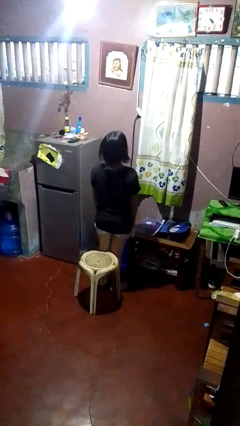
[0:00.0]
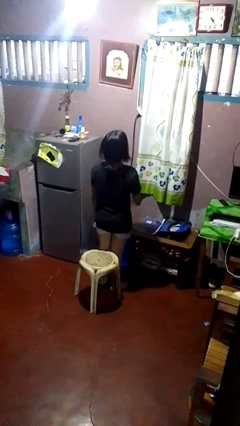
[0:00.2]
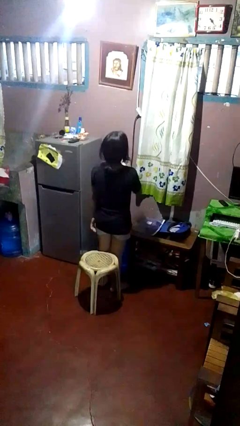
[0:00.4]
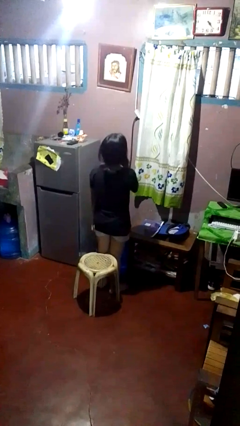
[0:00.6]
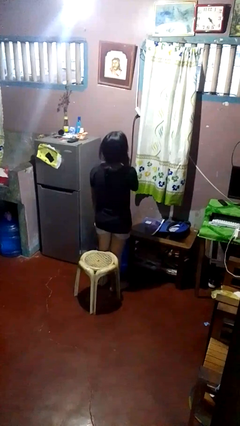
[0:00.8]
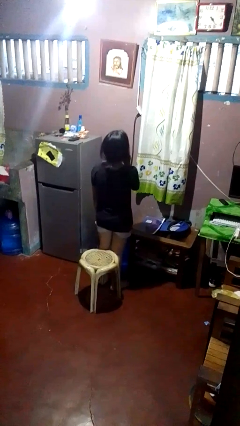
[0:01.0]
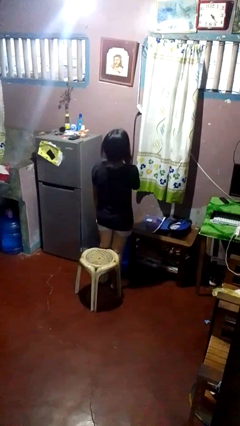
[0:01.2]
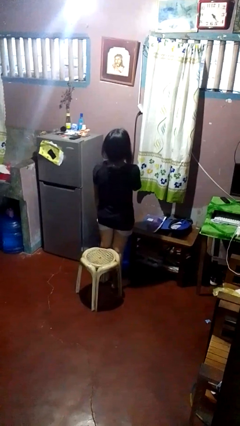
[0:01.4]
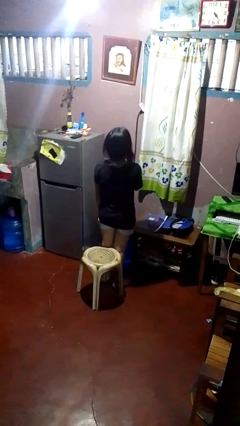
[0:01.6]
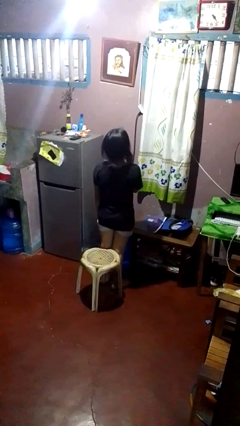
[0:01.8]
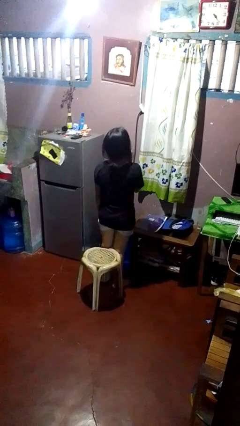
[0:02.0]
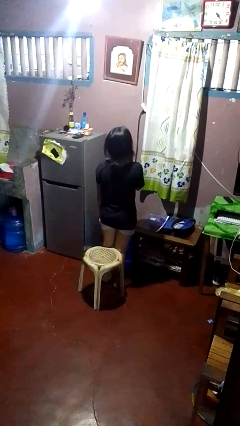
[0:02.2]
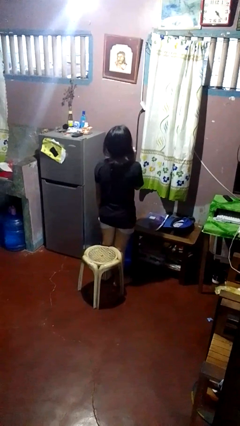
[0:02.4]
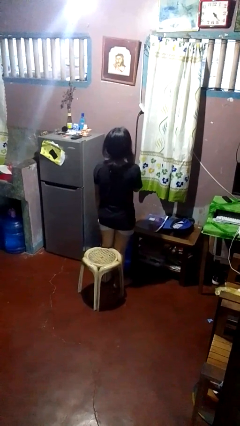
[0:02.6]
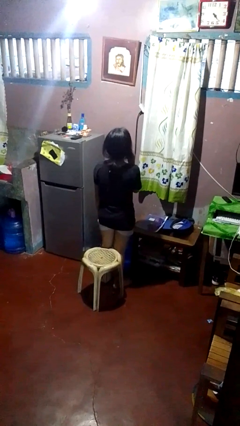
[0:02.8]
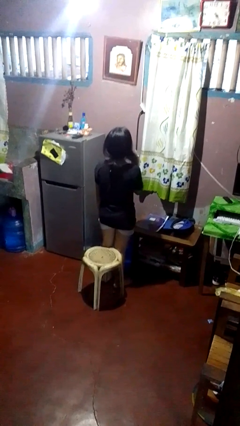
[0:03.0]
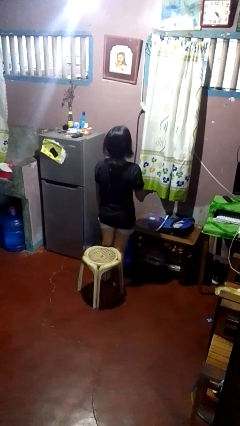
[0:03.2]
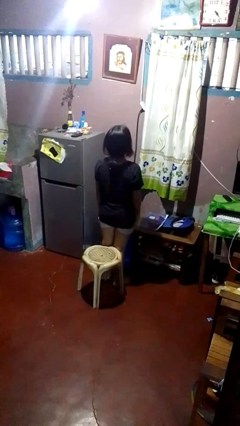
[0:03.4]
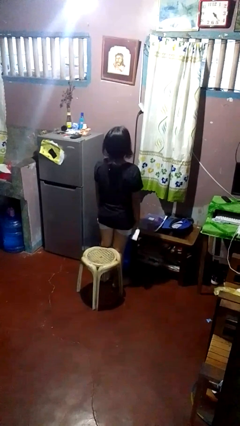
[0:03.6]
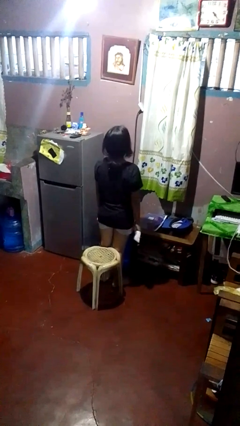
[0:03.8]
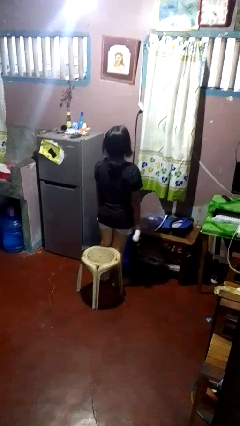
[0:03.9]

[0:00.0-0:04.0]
person wipes mouth with napkin

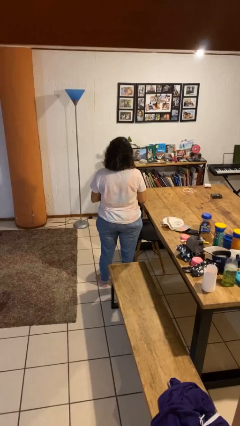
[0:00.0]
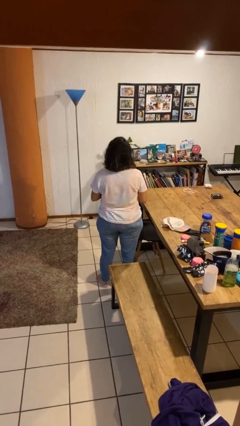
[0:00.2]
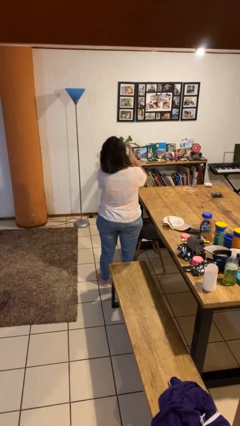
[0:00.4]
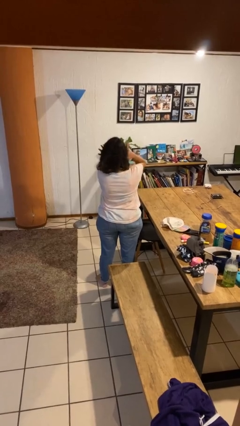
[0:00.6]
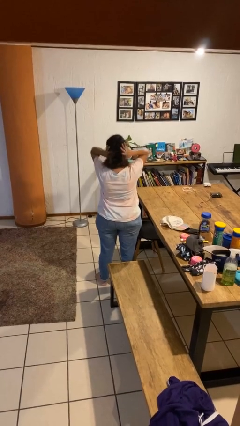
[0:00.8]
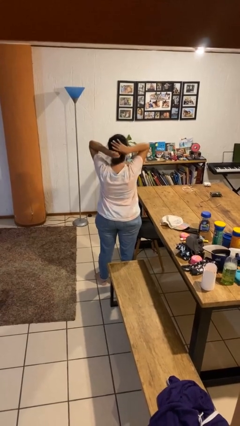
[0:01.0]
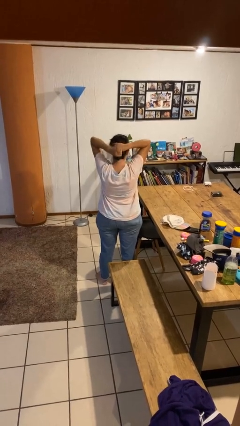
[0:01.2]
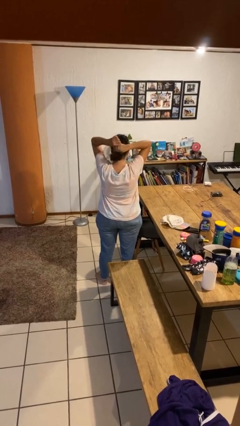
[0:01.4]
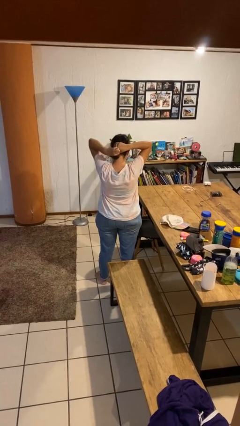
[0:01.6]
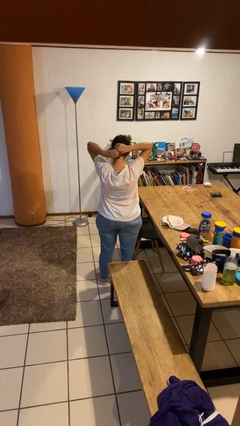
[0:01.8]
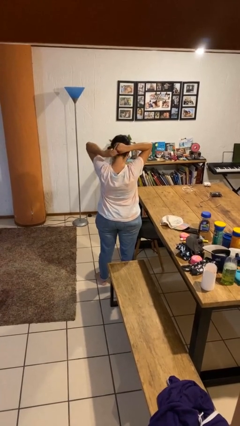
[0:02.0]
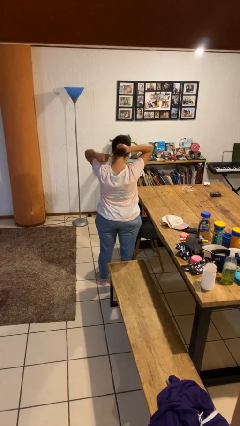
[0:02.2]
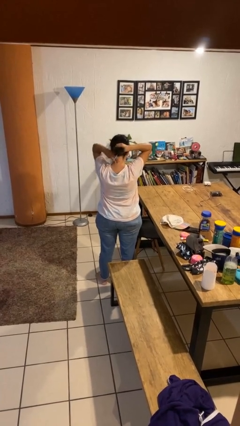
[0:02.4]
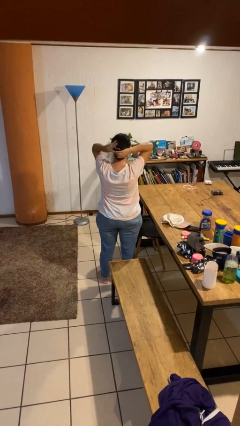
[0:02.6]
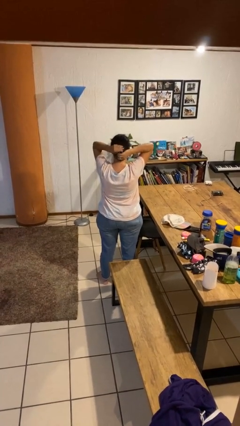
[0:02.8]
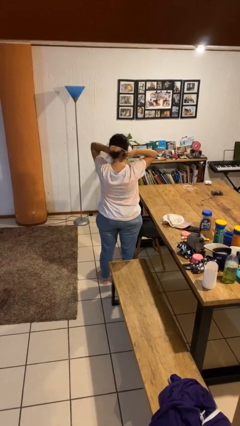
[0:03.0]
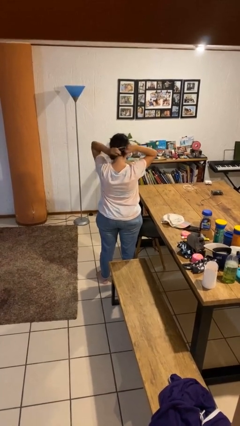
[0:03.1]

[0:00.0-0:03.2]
person puts hair in ponytail

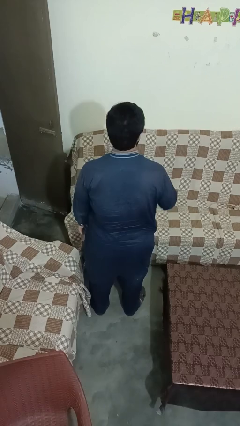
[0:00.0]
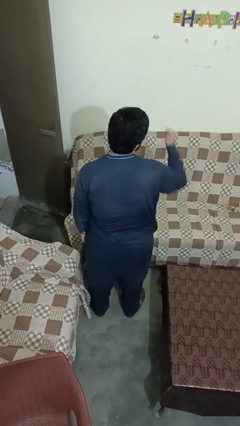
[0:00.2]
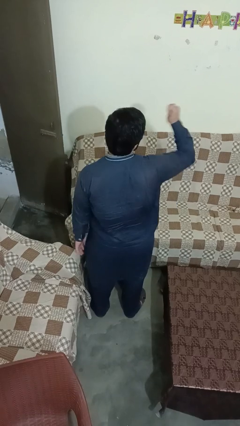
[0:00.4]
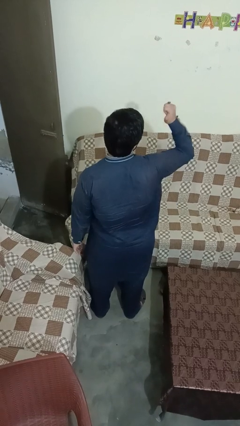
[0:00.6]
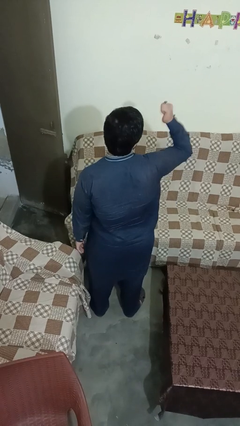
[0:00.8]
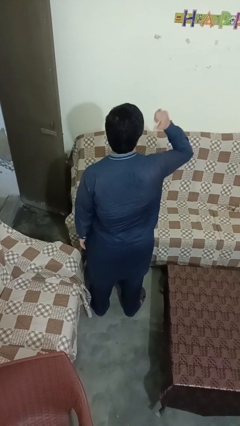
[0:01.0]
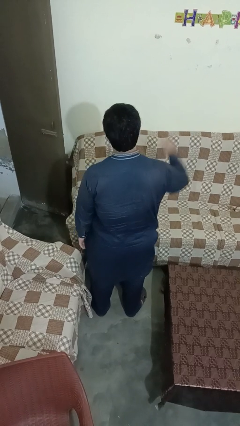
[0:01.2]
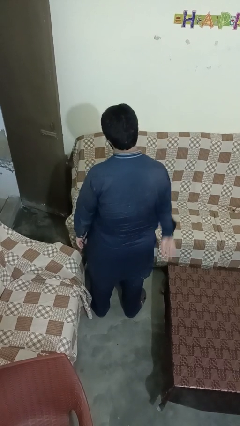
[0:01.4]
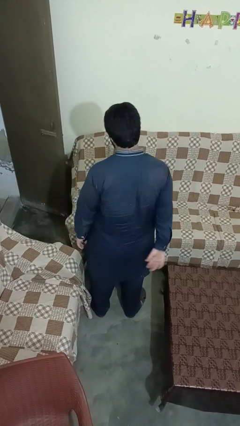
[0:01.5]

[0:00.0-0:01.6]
person gestures behind me

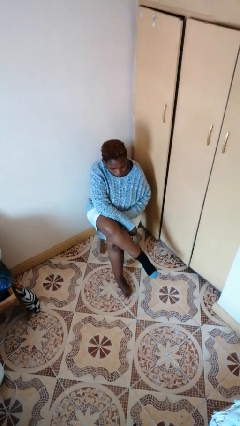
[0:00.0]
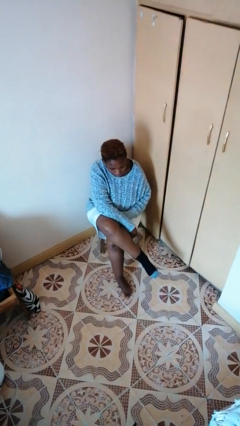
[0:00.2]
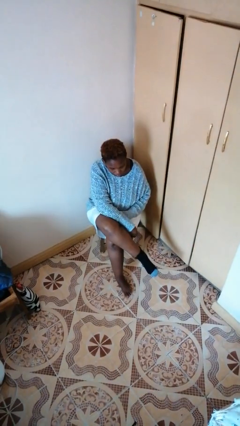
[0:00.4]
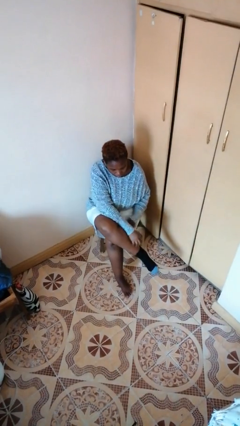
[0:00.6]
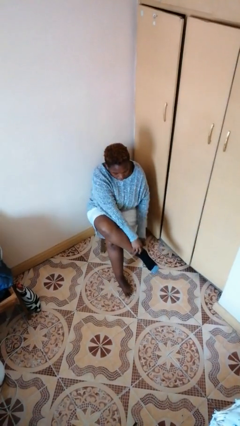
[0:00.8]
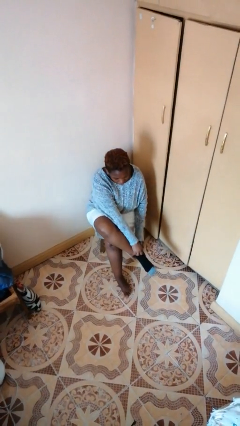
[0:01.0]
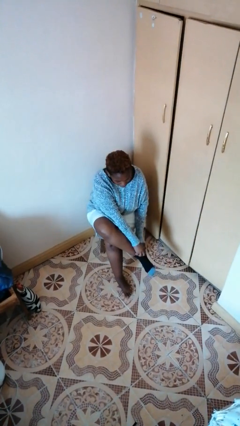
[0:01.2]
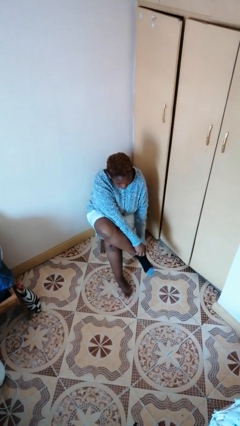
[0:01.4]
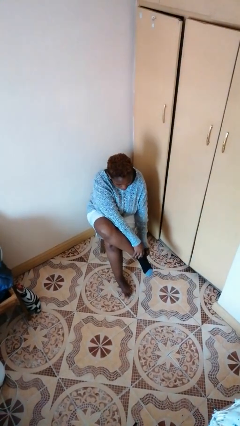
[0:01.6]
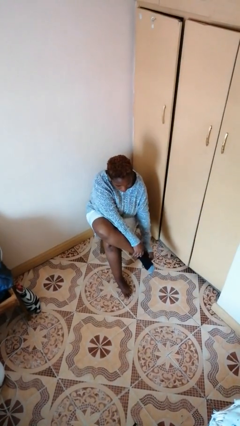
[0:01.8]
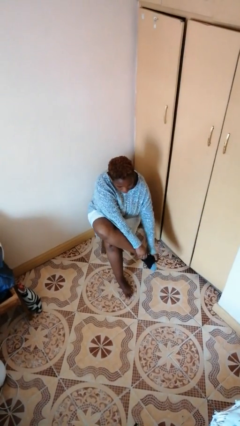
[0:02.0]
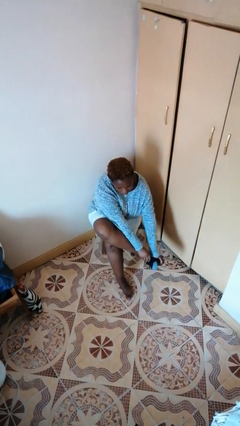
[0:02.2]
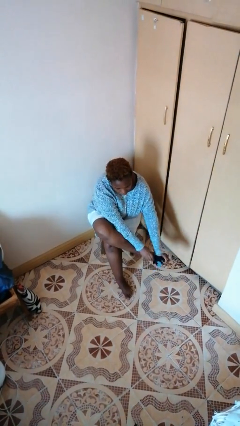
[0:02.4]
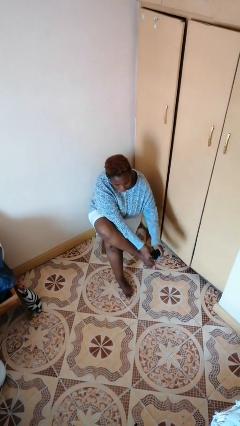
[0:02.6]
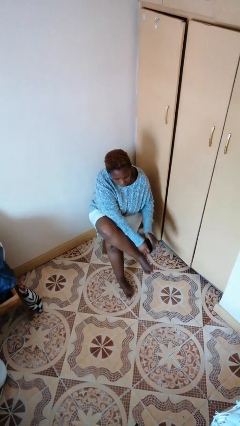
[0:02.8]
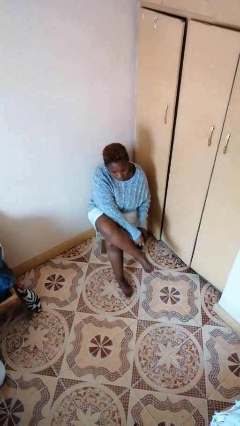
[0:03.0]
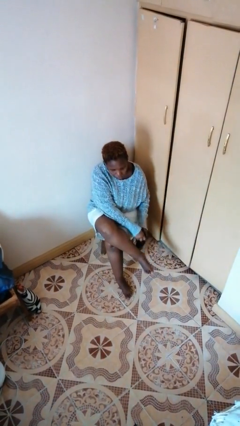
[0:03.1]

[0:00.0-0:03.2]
person takes off socks

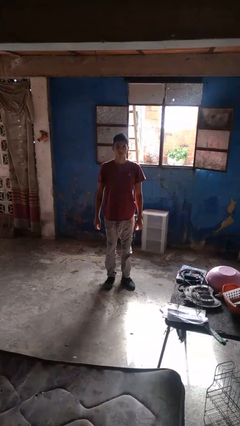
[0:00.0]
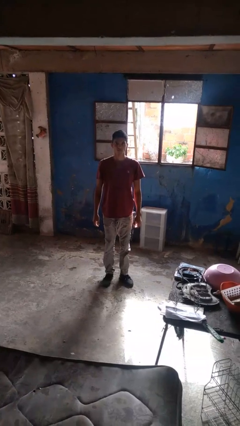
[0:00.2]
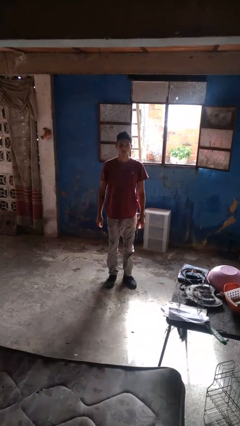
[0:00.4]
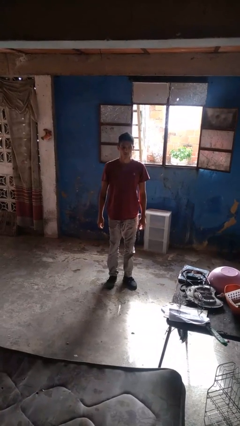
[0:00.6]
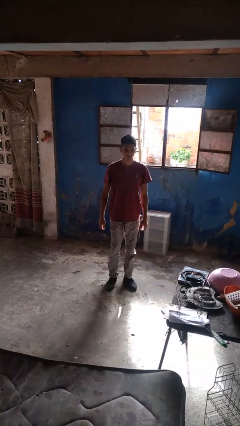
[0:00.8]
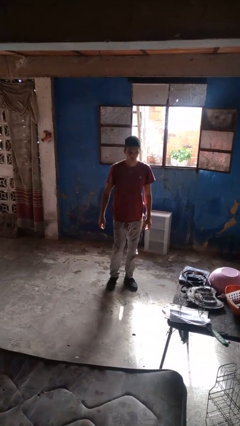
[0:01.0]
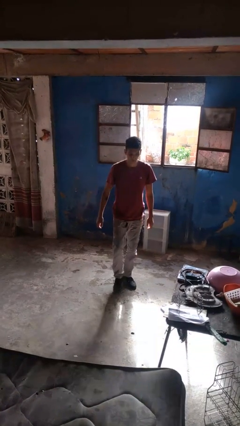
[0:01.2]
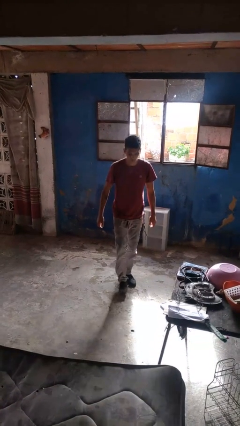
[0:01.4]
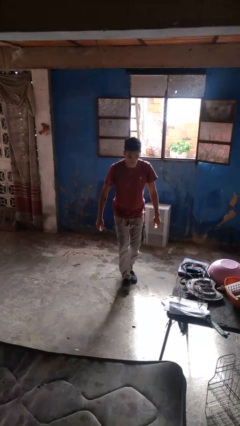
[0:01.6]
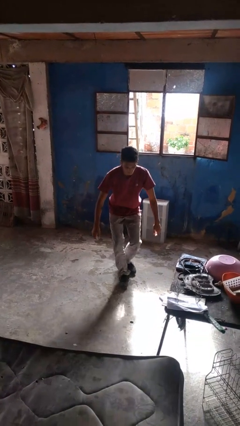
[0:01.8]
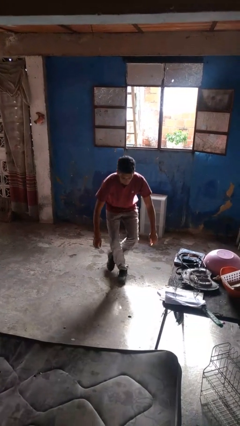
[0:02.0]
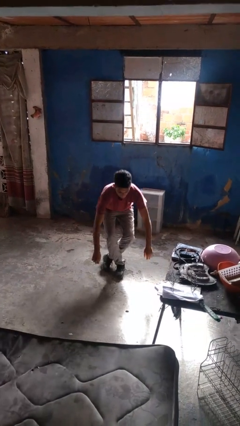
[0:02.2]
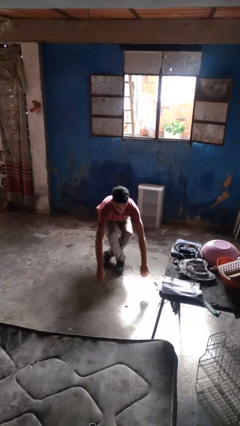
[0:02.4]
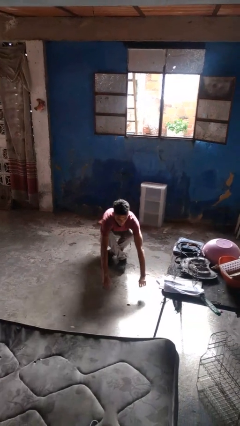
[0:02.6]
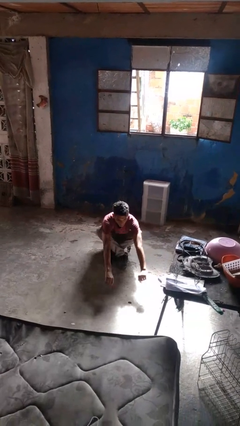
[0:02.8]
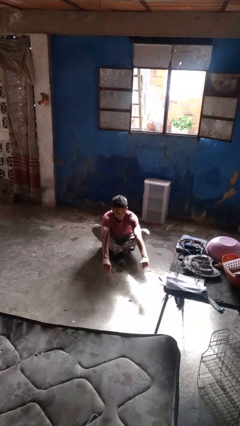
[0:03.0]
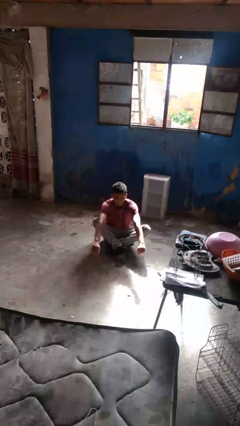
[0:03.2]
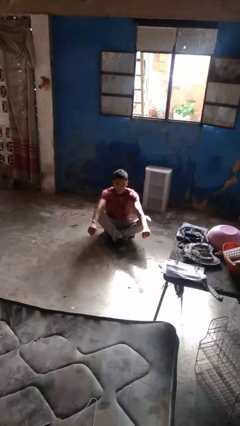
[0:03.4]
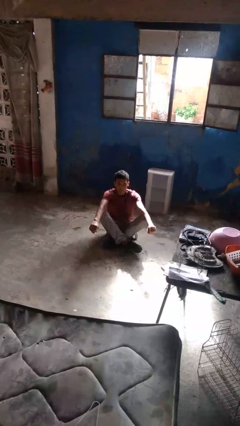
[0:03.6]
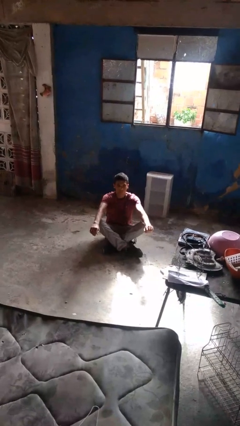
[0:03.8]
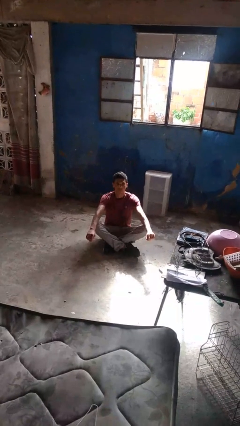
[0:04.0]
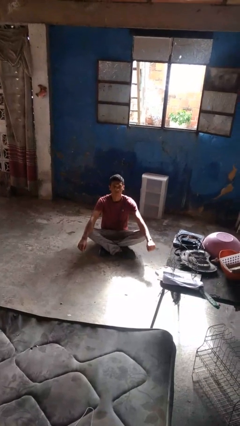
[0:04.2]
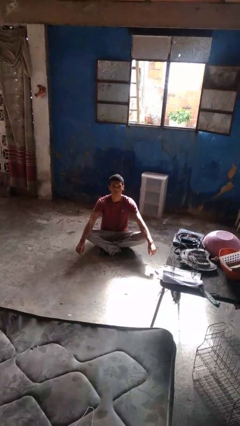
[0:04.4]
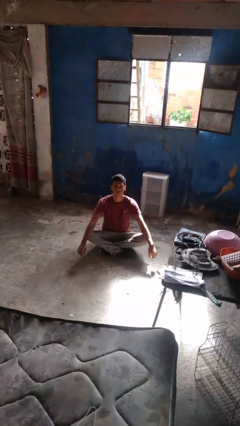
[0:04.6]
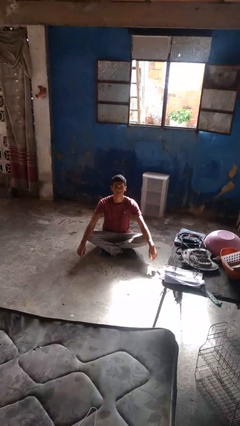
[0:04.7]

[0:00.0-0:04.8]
person sits crisscross

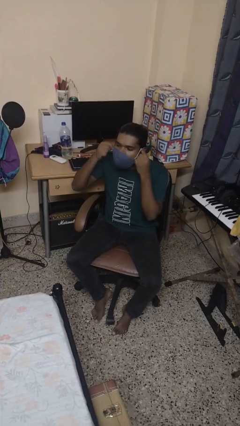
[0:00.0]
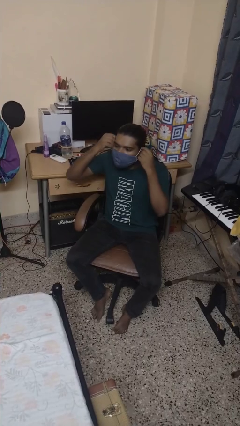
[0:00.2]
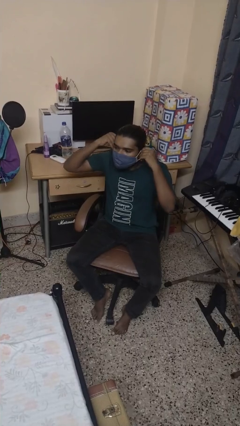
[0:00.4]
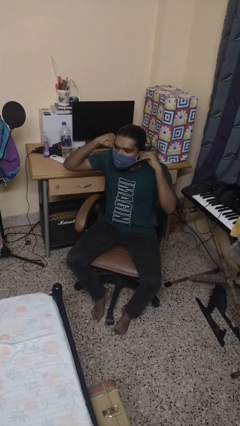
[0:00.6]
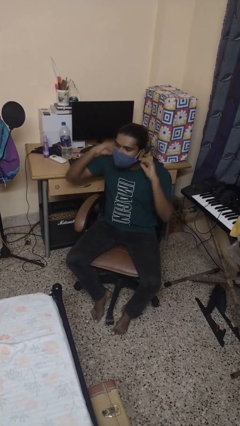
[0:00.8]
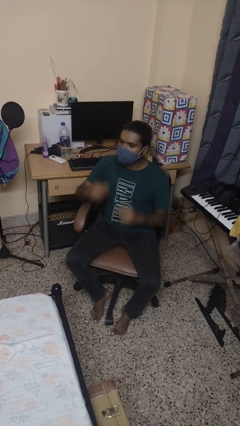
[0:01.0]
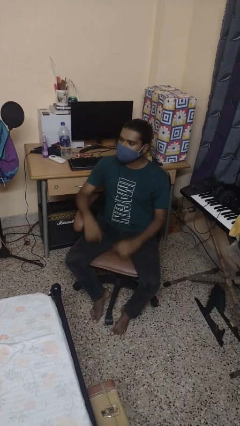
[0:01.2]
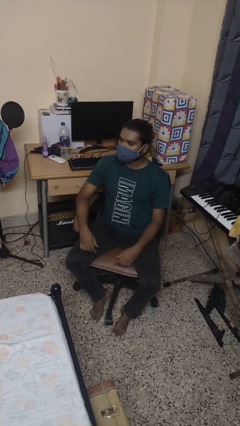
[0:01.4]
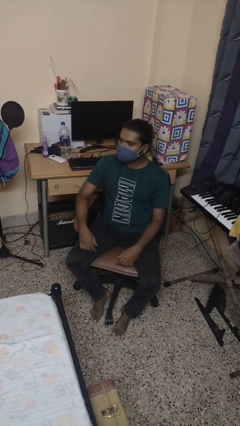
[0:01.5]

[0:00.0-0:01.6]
person puts on facemask
